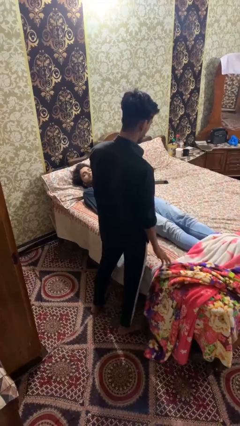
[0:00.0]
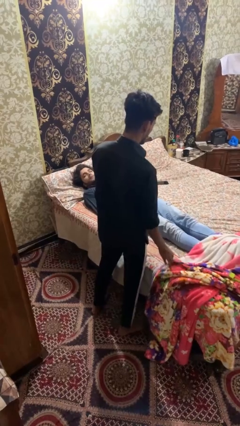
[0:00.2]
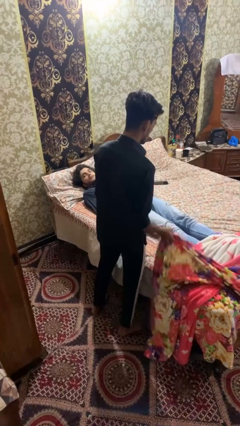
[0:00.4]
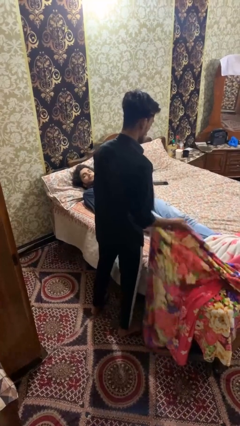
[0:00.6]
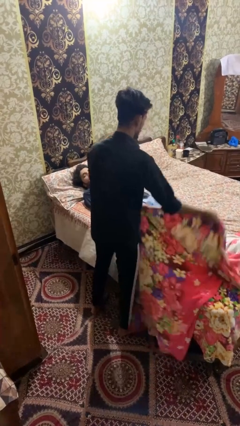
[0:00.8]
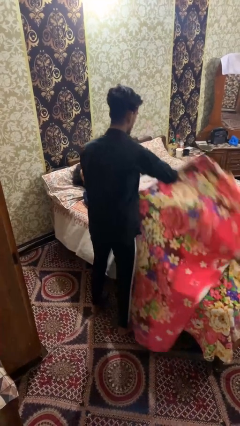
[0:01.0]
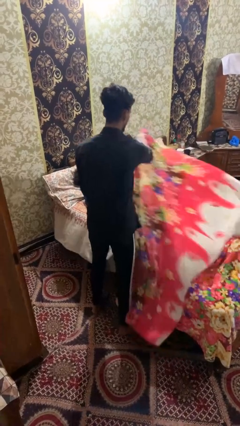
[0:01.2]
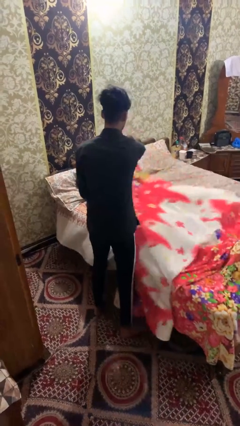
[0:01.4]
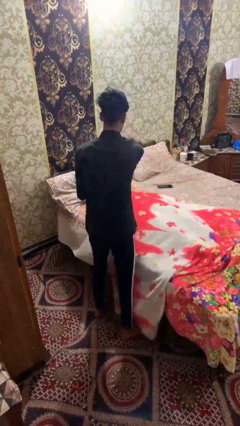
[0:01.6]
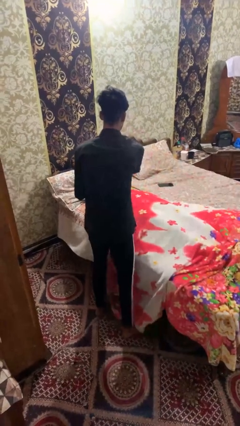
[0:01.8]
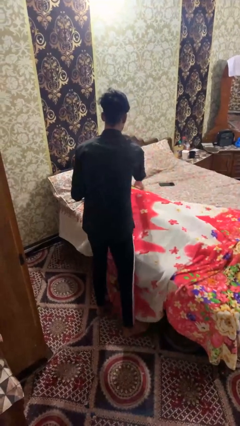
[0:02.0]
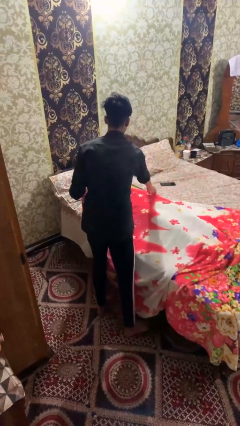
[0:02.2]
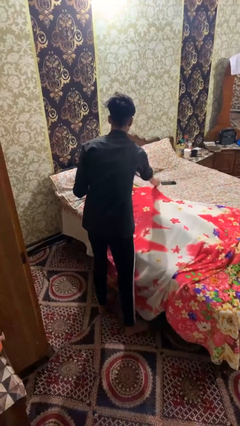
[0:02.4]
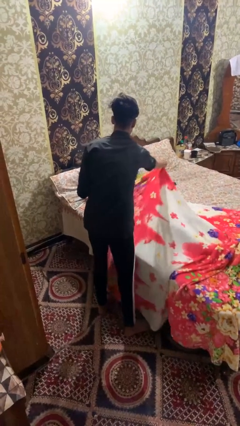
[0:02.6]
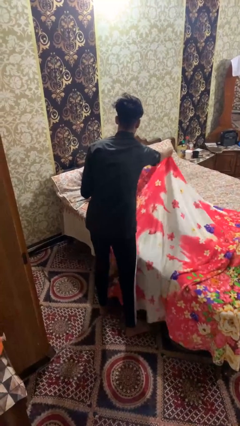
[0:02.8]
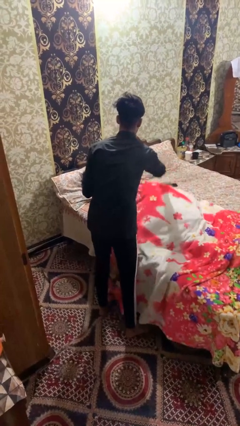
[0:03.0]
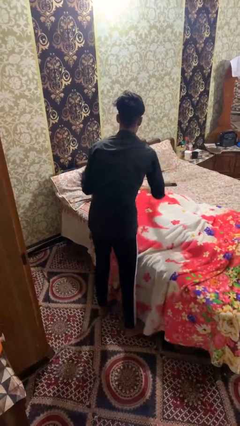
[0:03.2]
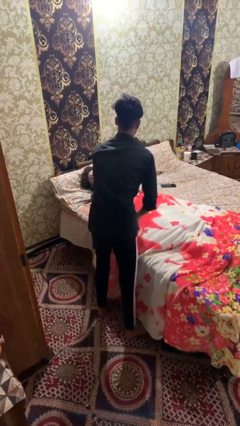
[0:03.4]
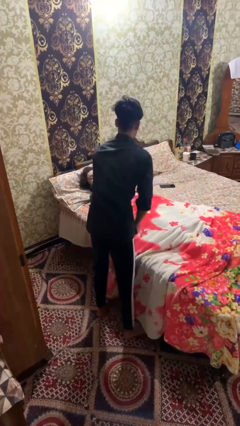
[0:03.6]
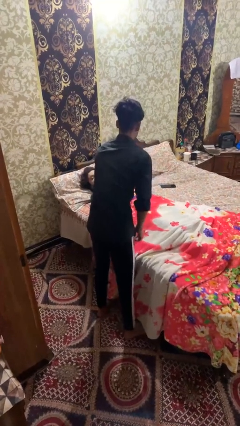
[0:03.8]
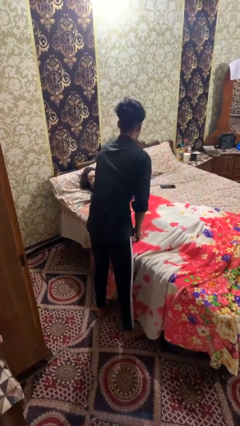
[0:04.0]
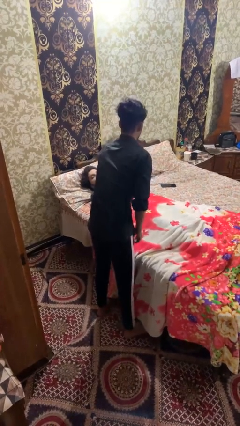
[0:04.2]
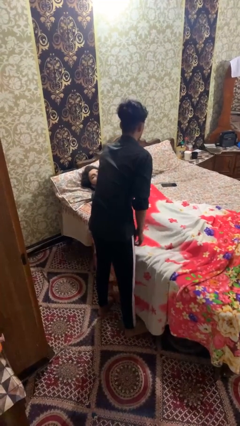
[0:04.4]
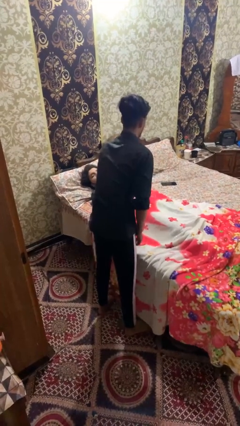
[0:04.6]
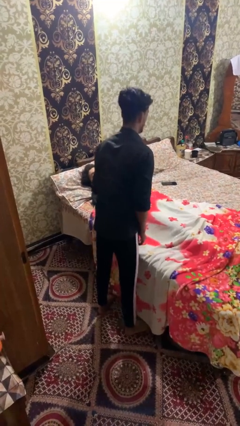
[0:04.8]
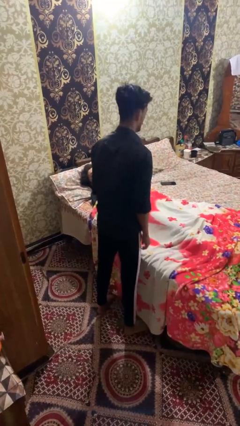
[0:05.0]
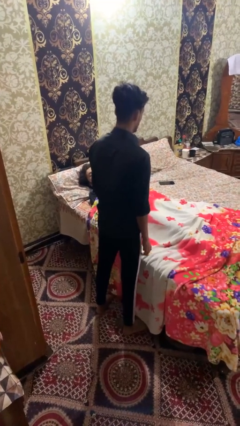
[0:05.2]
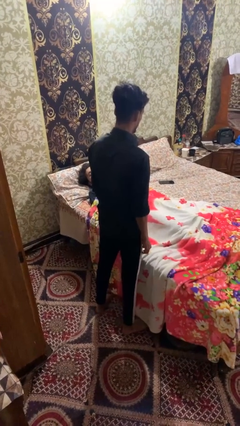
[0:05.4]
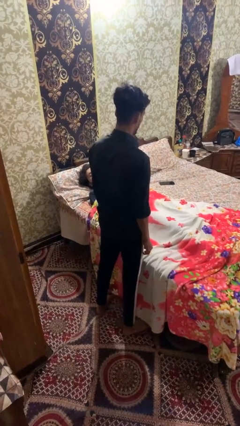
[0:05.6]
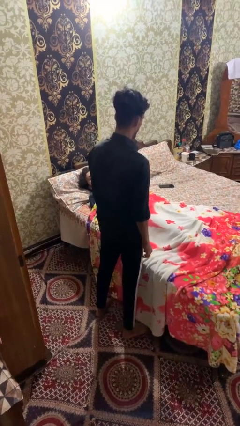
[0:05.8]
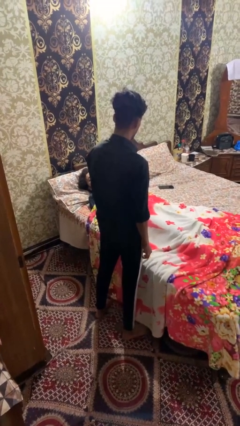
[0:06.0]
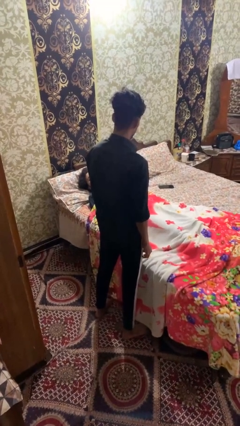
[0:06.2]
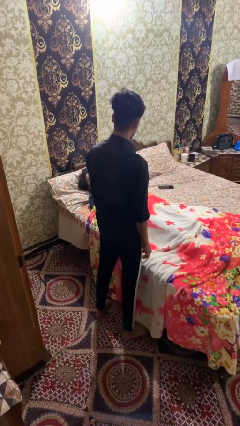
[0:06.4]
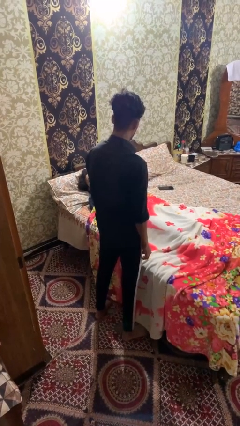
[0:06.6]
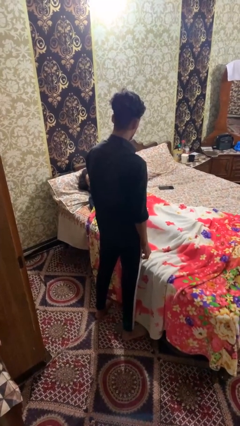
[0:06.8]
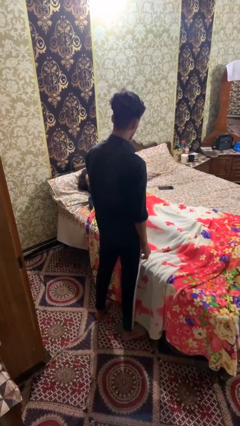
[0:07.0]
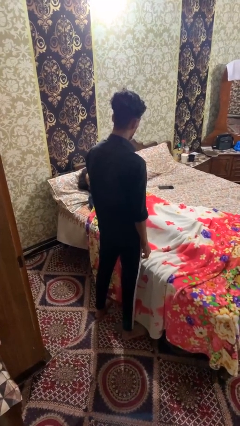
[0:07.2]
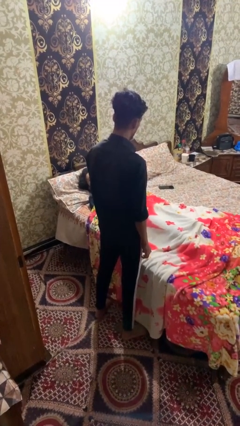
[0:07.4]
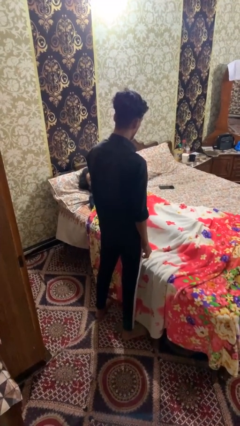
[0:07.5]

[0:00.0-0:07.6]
person covers friend with blanket

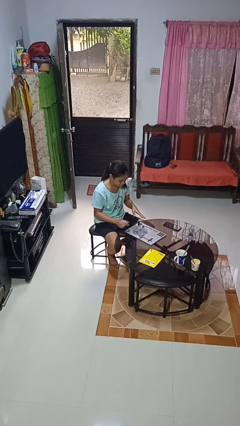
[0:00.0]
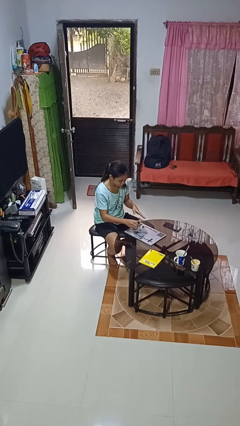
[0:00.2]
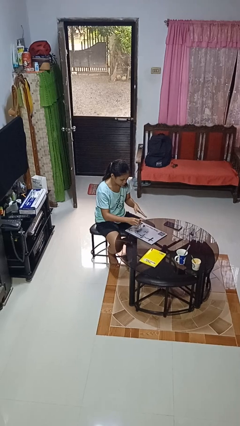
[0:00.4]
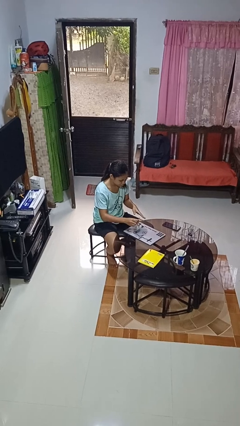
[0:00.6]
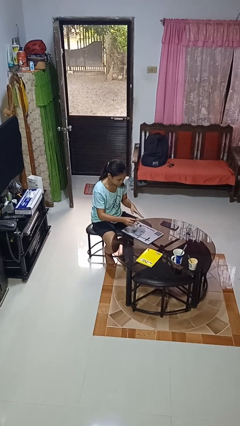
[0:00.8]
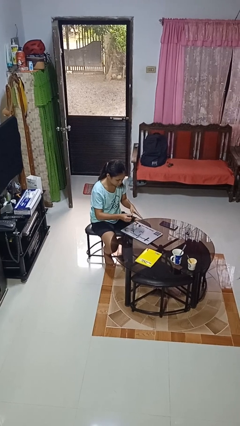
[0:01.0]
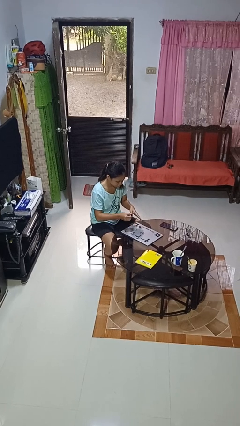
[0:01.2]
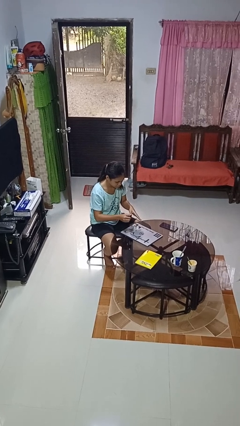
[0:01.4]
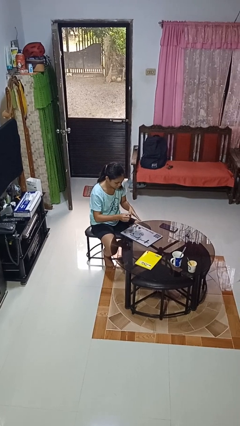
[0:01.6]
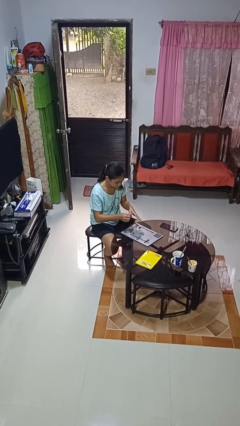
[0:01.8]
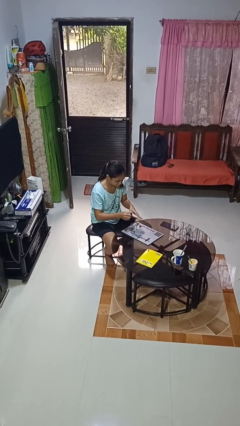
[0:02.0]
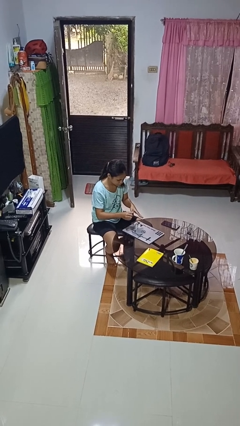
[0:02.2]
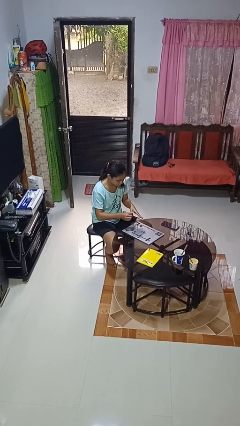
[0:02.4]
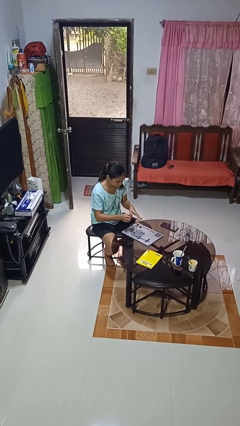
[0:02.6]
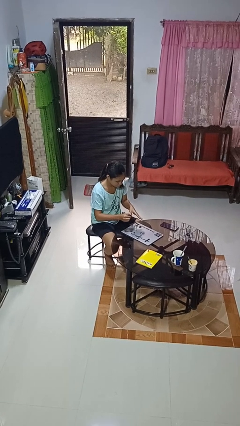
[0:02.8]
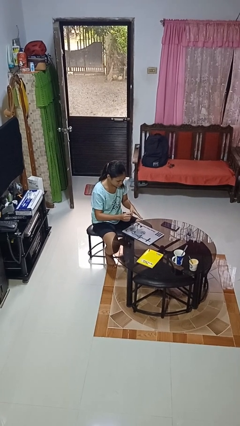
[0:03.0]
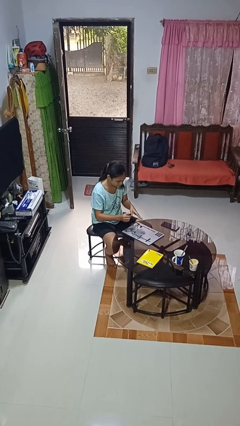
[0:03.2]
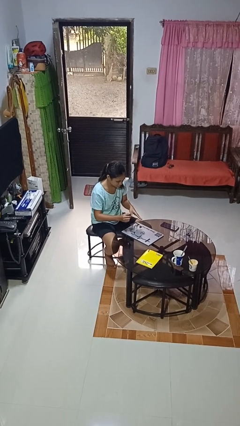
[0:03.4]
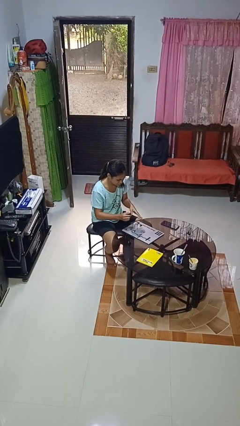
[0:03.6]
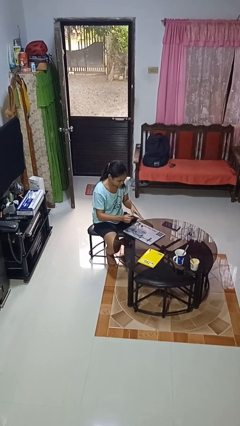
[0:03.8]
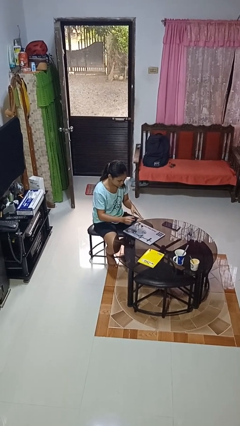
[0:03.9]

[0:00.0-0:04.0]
person paints fingernails

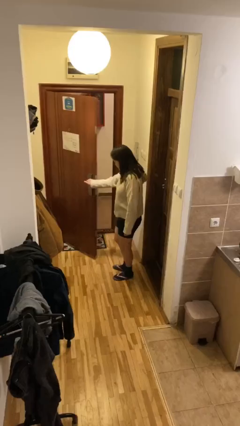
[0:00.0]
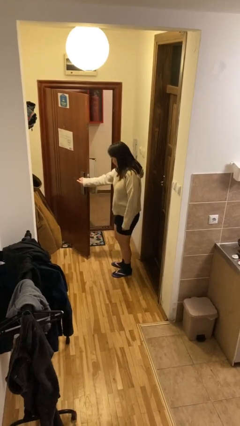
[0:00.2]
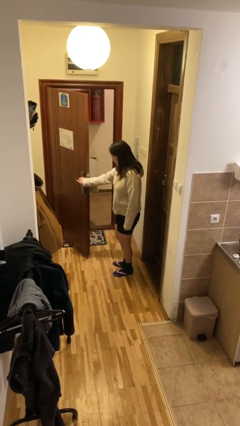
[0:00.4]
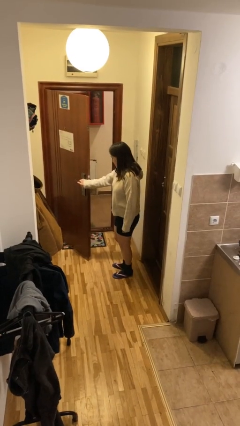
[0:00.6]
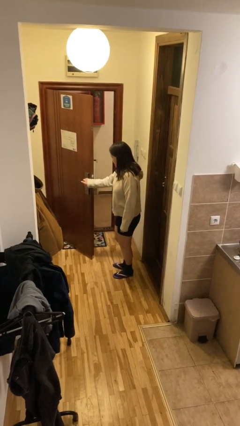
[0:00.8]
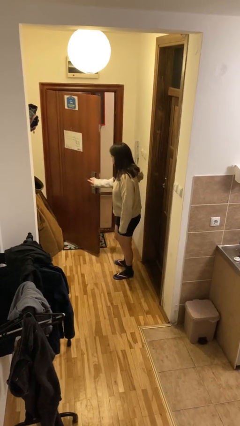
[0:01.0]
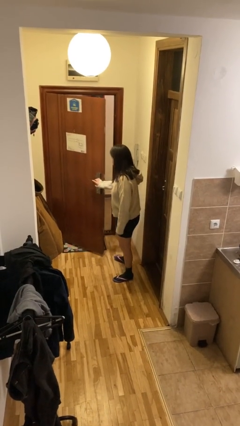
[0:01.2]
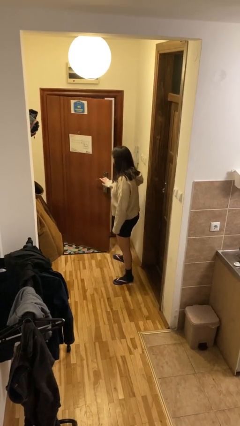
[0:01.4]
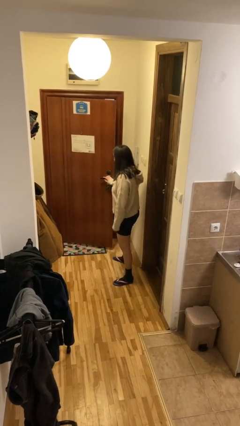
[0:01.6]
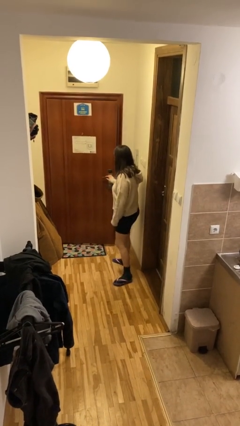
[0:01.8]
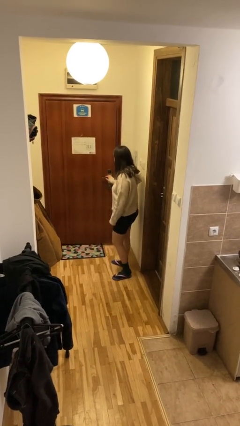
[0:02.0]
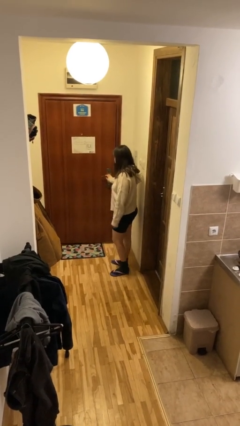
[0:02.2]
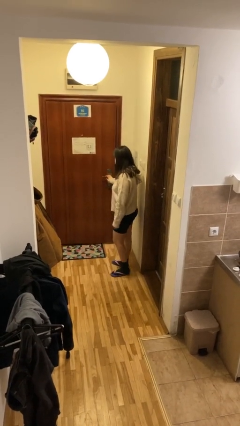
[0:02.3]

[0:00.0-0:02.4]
person closes facility door

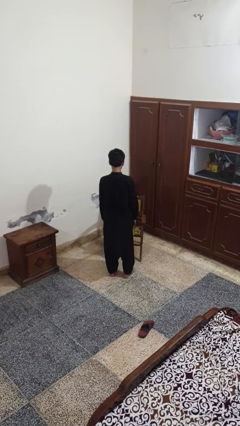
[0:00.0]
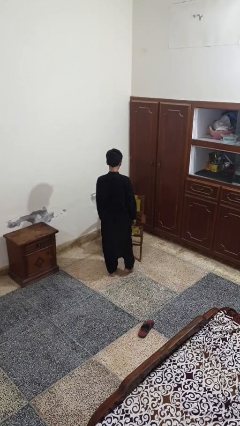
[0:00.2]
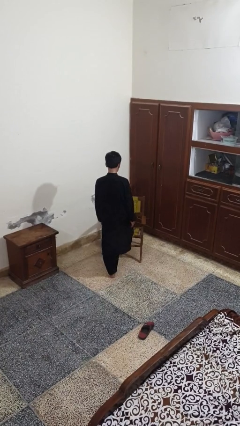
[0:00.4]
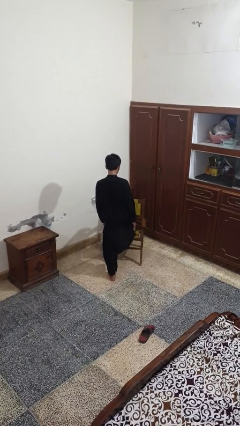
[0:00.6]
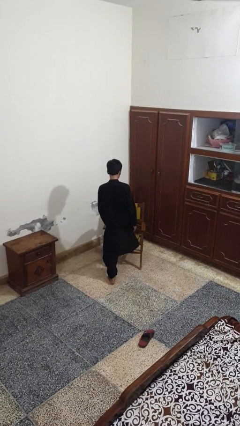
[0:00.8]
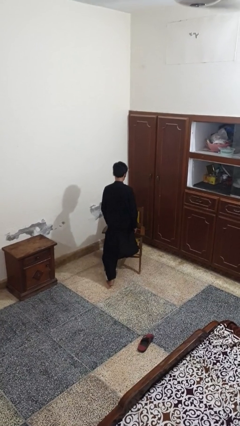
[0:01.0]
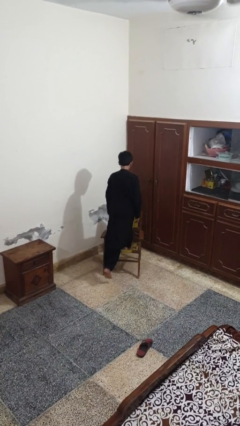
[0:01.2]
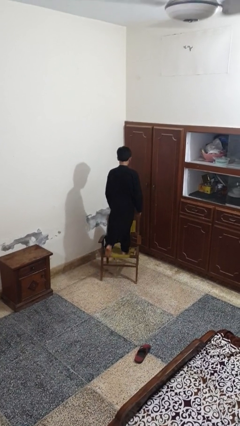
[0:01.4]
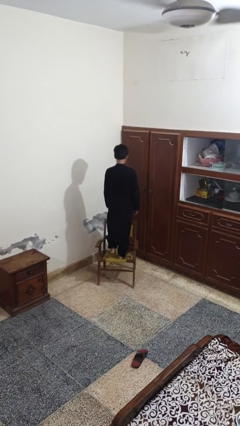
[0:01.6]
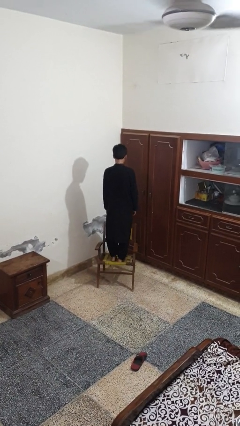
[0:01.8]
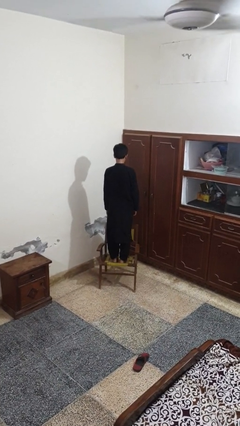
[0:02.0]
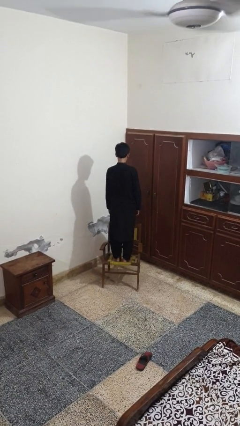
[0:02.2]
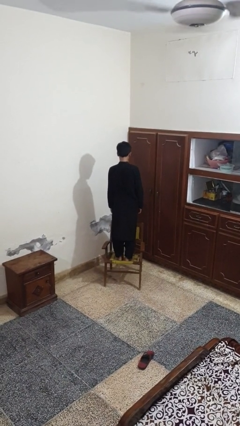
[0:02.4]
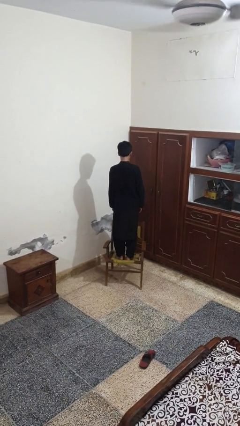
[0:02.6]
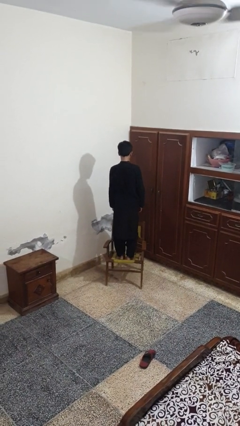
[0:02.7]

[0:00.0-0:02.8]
person climbs on chair

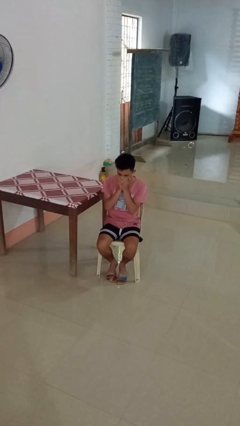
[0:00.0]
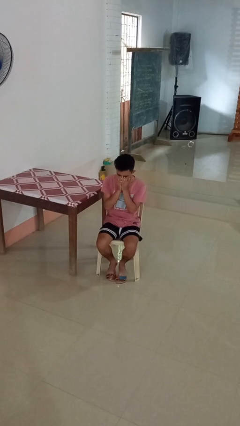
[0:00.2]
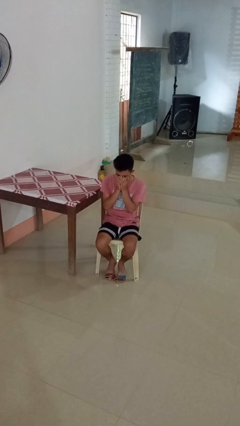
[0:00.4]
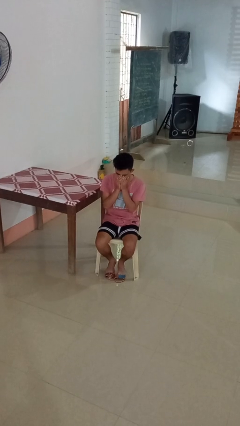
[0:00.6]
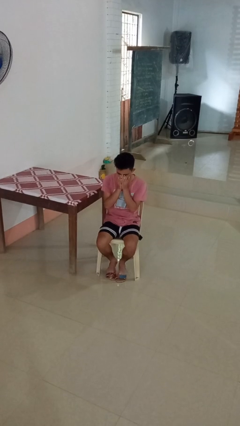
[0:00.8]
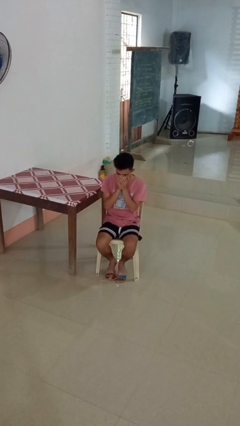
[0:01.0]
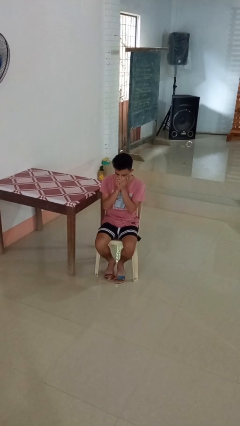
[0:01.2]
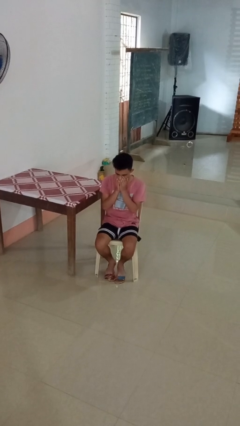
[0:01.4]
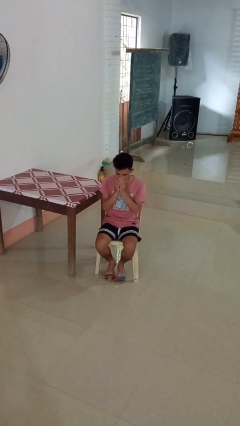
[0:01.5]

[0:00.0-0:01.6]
person sneezes into hand
